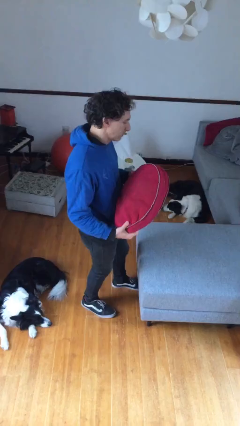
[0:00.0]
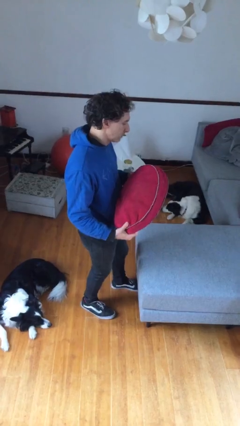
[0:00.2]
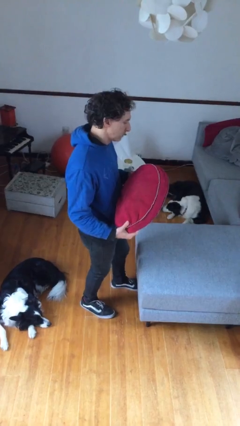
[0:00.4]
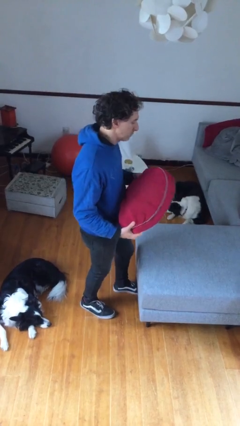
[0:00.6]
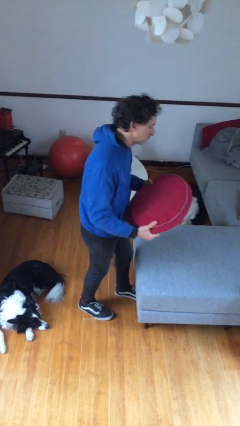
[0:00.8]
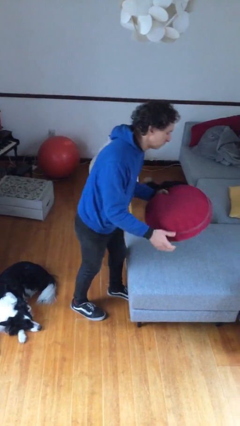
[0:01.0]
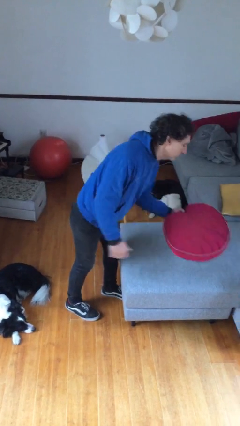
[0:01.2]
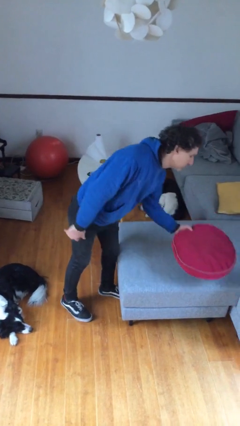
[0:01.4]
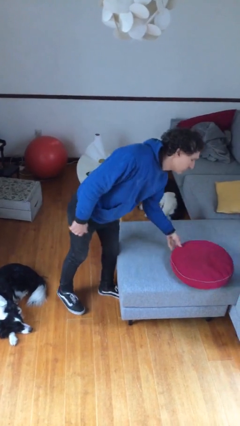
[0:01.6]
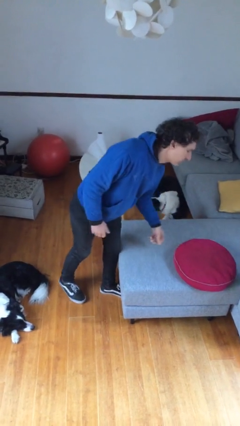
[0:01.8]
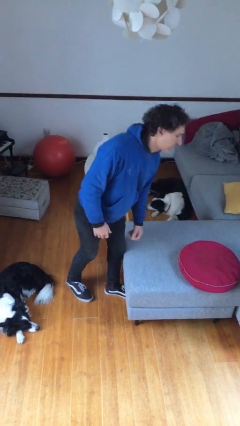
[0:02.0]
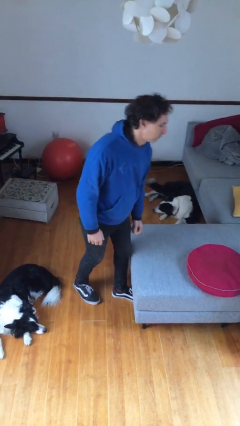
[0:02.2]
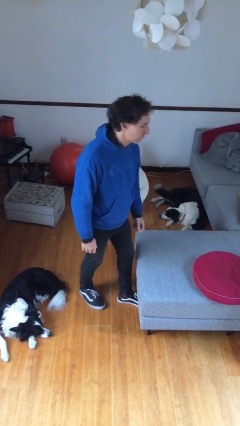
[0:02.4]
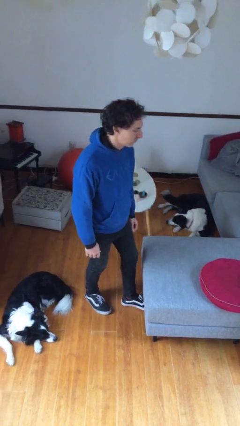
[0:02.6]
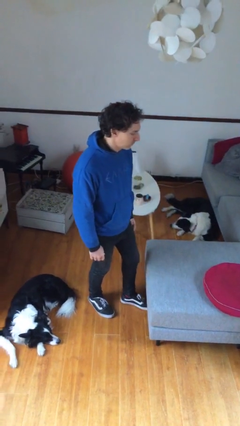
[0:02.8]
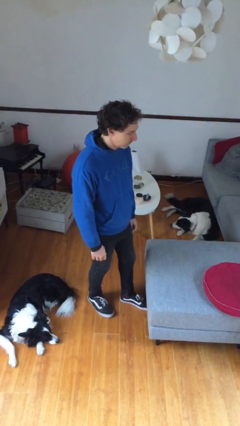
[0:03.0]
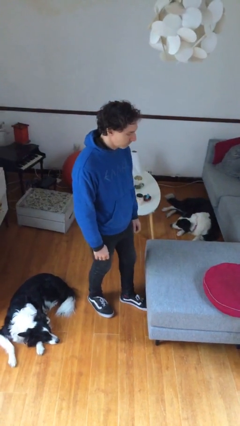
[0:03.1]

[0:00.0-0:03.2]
person puts down object on couch

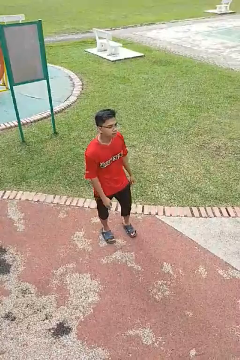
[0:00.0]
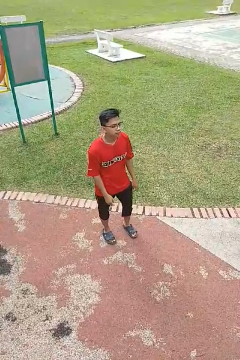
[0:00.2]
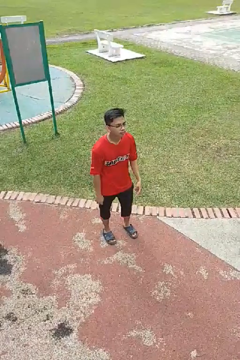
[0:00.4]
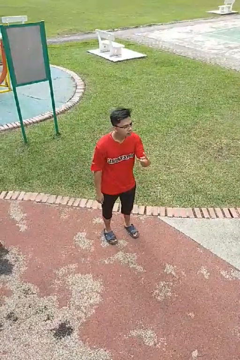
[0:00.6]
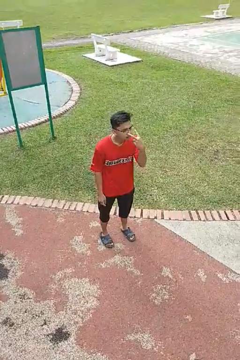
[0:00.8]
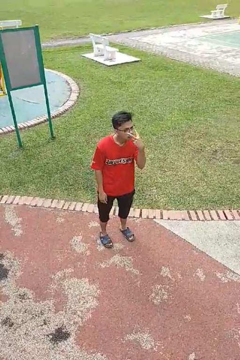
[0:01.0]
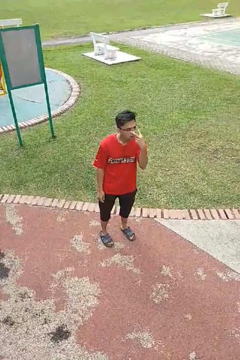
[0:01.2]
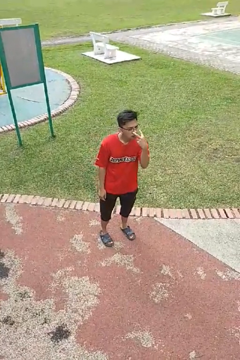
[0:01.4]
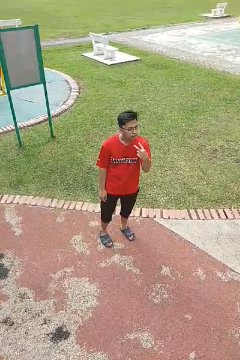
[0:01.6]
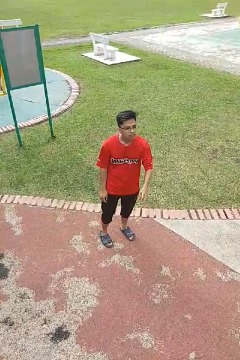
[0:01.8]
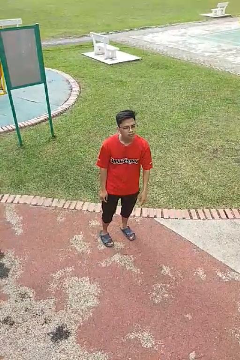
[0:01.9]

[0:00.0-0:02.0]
person gestures watch closely

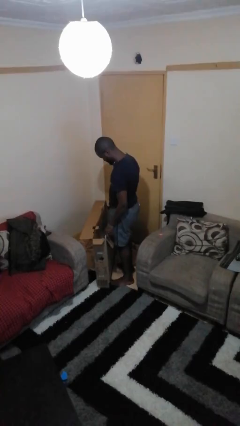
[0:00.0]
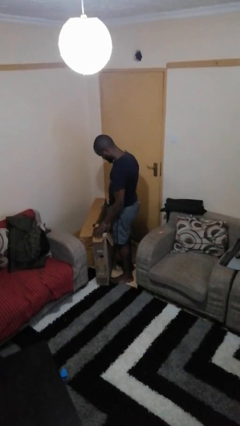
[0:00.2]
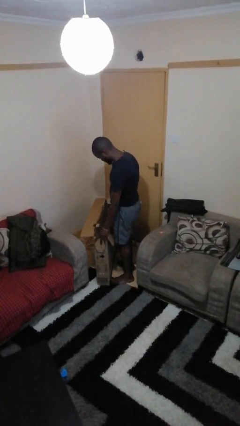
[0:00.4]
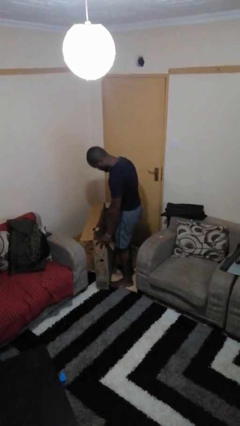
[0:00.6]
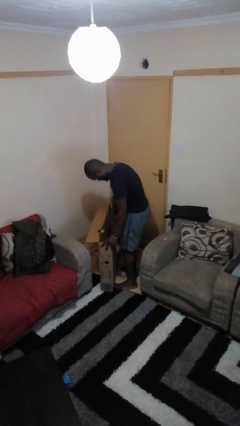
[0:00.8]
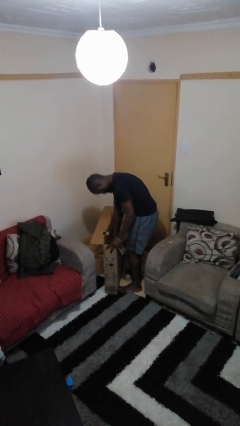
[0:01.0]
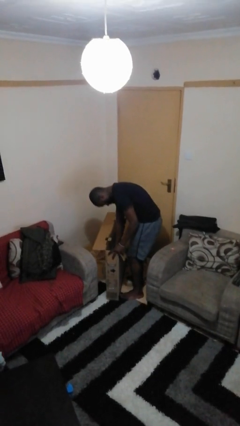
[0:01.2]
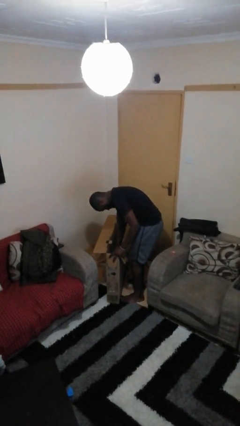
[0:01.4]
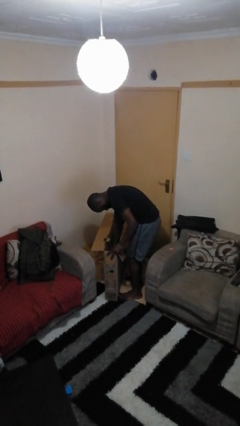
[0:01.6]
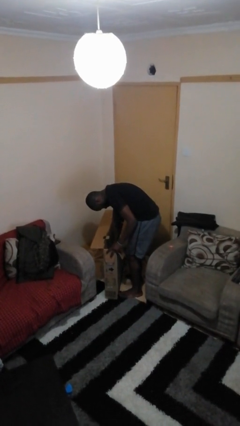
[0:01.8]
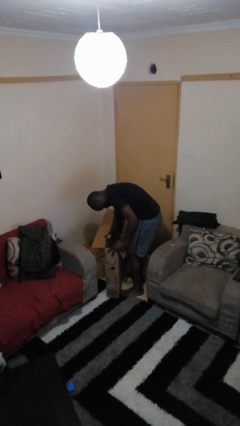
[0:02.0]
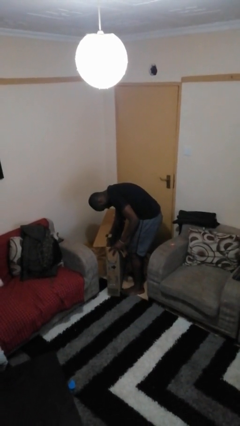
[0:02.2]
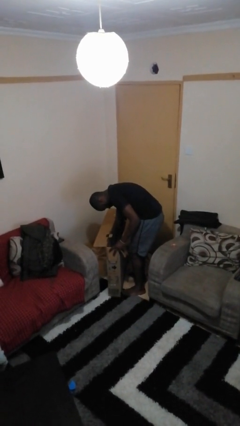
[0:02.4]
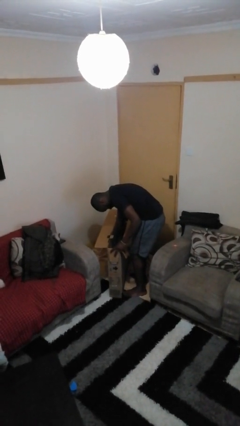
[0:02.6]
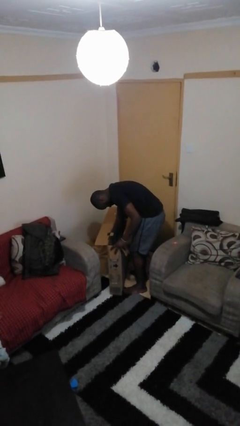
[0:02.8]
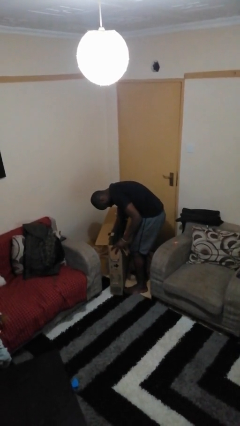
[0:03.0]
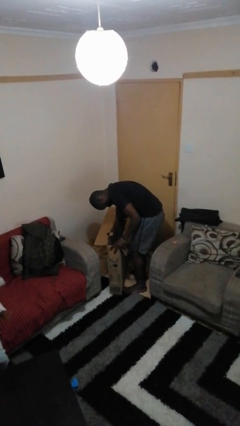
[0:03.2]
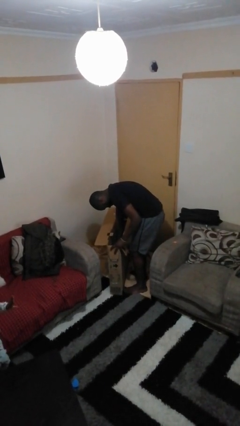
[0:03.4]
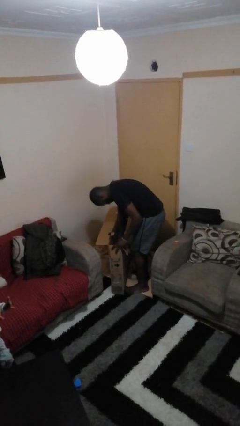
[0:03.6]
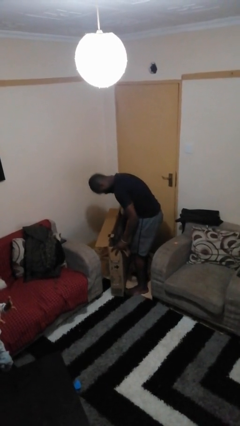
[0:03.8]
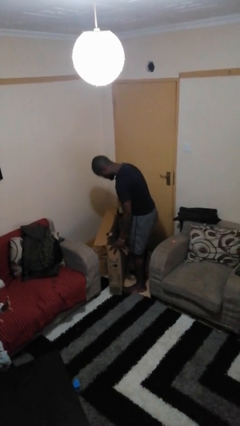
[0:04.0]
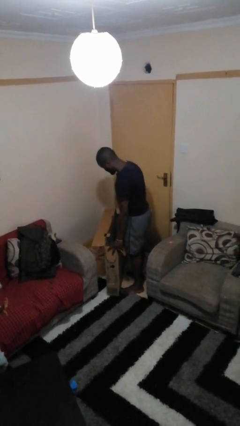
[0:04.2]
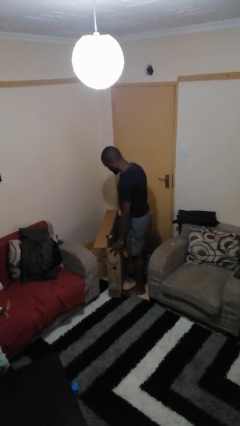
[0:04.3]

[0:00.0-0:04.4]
person searches in box

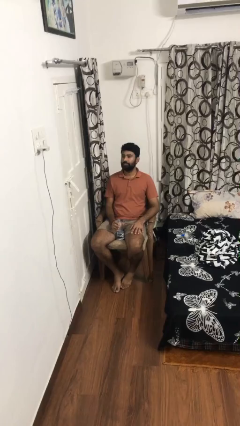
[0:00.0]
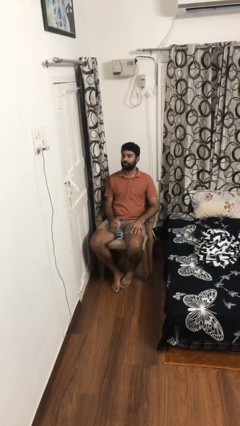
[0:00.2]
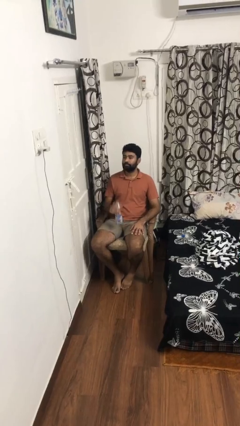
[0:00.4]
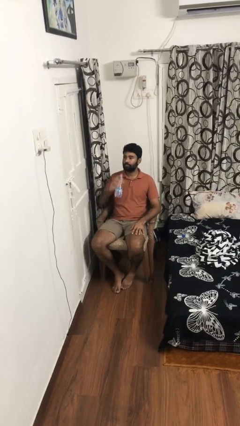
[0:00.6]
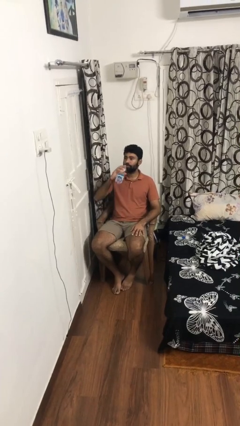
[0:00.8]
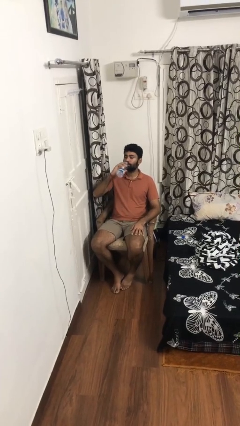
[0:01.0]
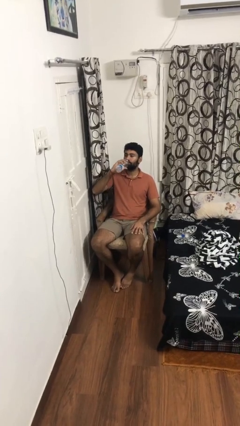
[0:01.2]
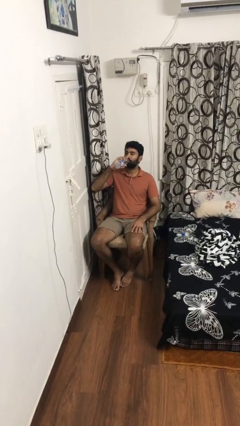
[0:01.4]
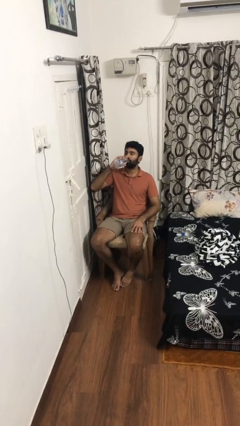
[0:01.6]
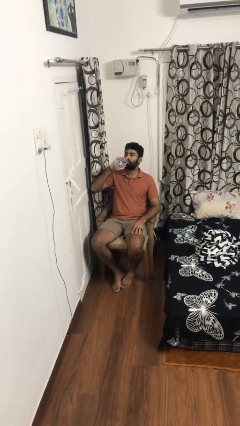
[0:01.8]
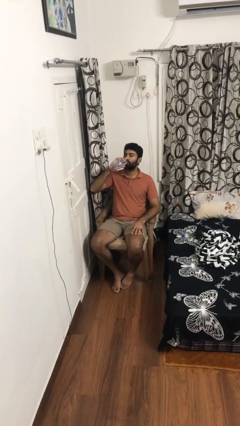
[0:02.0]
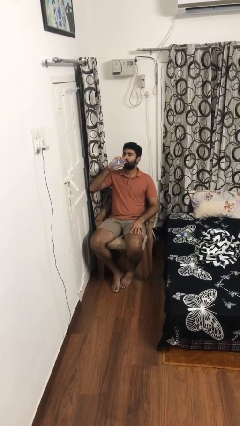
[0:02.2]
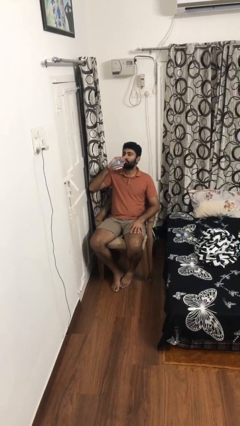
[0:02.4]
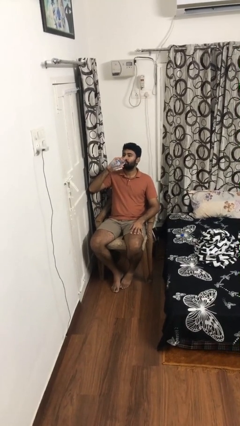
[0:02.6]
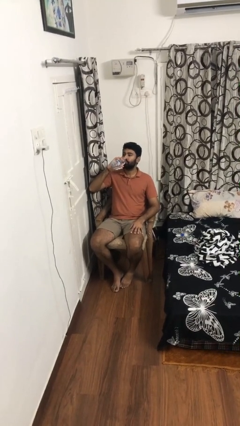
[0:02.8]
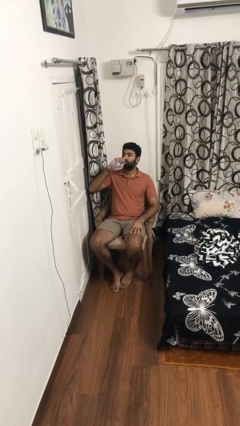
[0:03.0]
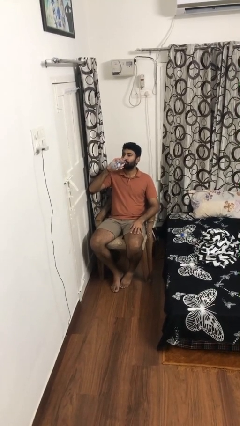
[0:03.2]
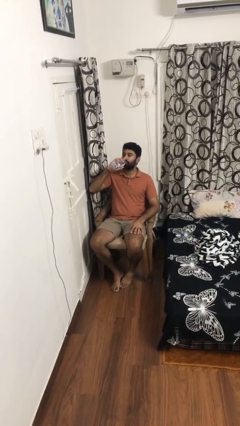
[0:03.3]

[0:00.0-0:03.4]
person drinks from bottle

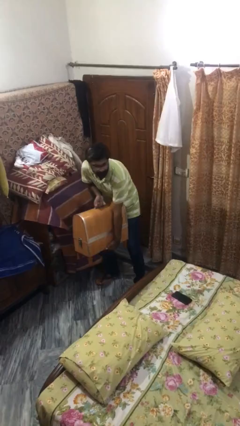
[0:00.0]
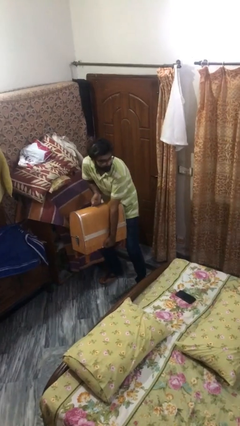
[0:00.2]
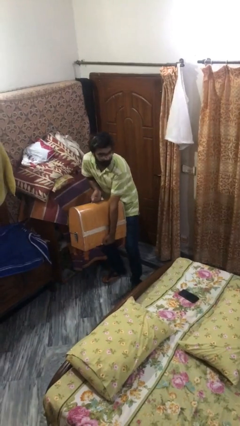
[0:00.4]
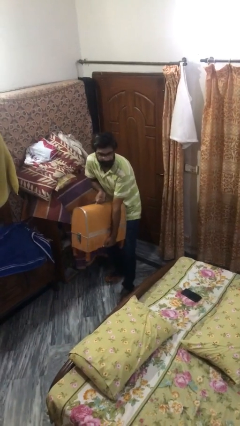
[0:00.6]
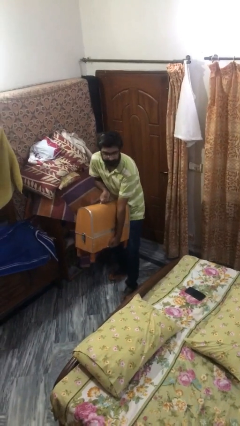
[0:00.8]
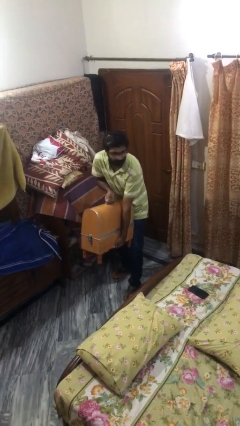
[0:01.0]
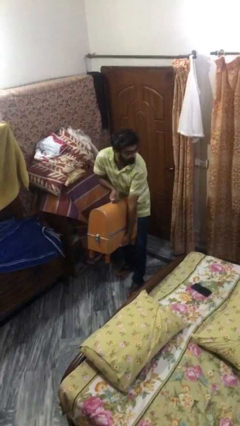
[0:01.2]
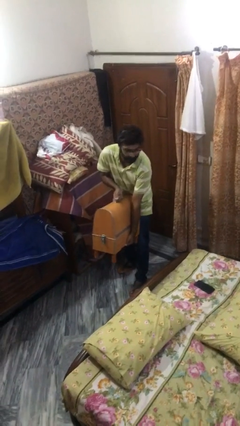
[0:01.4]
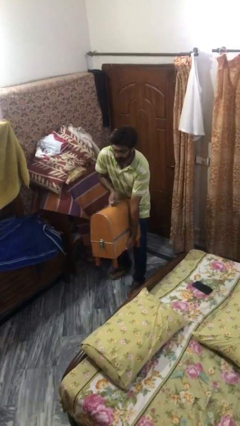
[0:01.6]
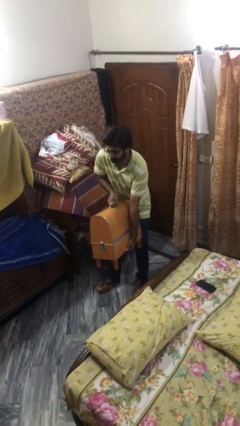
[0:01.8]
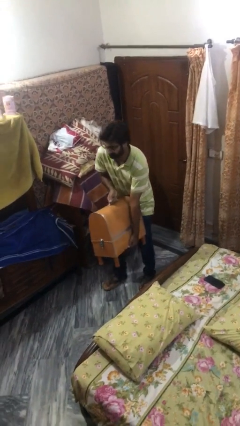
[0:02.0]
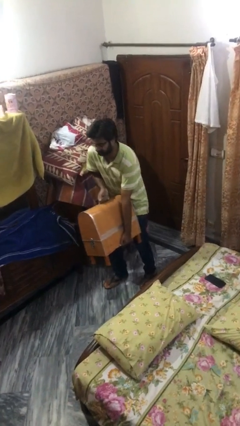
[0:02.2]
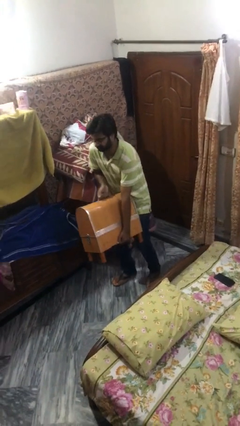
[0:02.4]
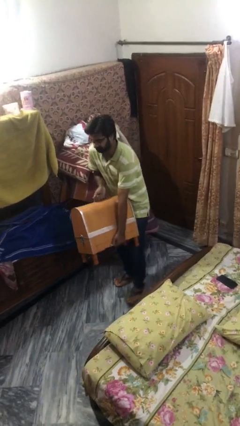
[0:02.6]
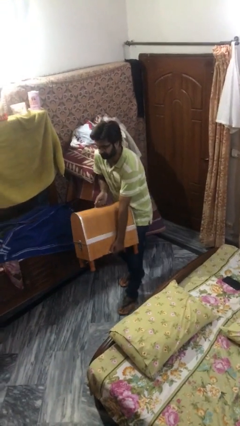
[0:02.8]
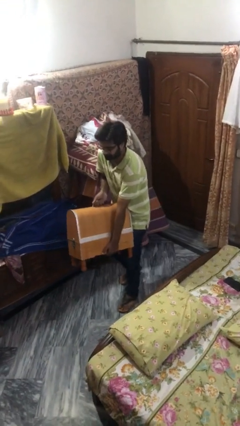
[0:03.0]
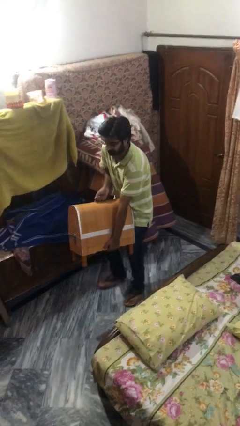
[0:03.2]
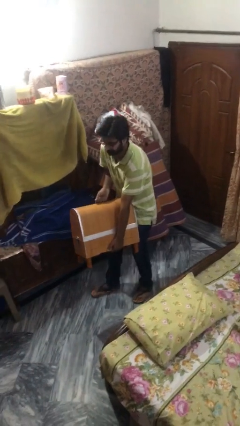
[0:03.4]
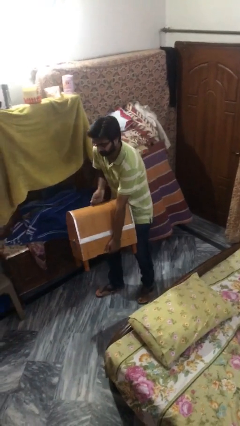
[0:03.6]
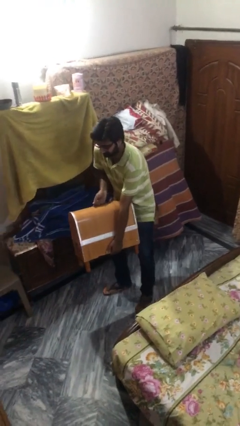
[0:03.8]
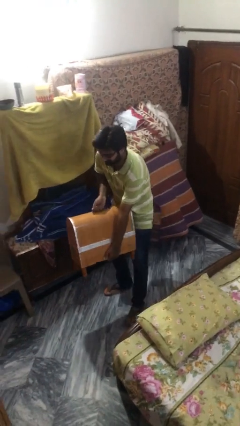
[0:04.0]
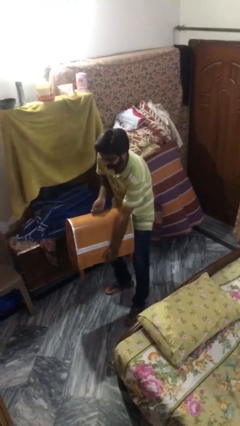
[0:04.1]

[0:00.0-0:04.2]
person carries heavy object

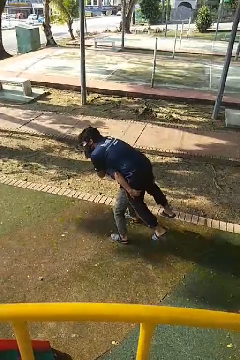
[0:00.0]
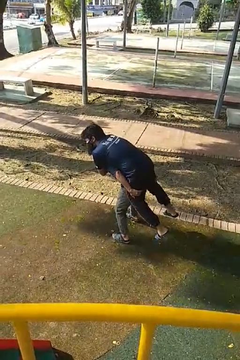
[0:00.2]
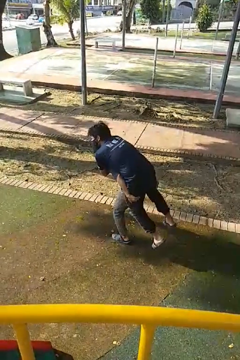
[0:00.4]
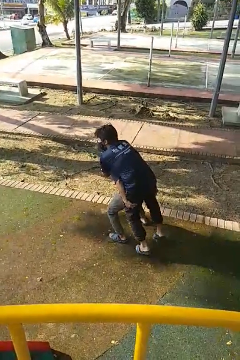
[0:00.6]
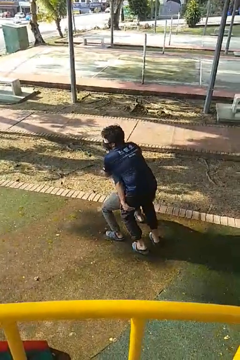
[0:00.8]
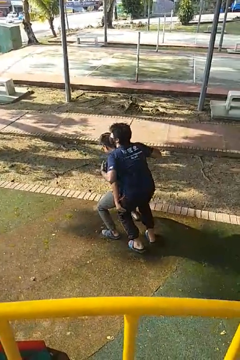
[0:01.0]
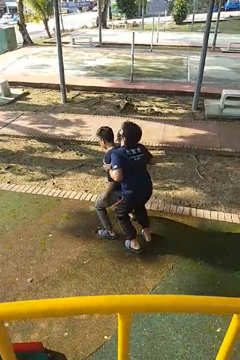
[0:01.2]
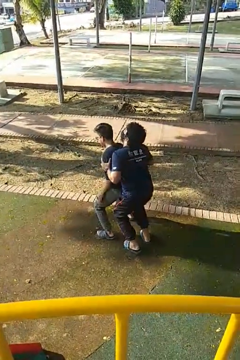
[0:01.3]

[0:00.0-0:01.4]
person puts down person
